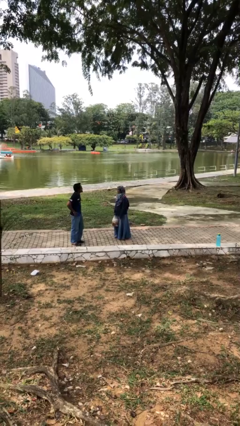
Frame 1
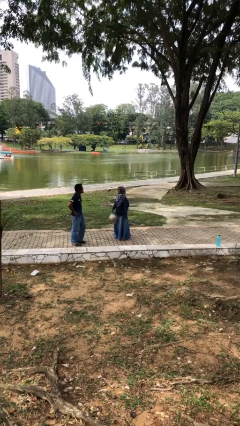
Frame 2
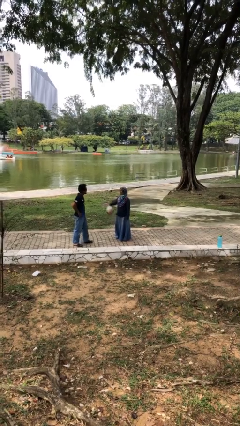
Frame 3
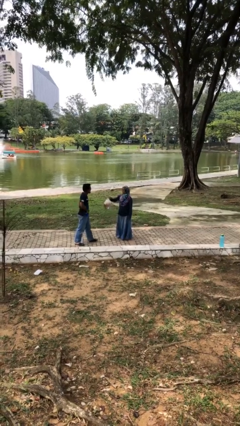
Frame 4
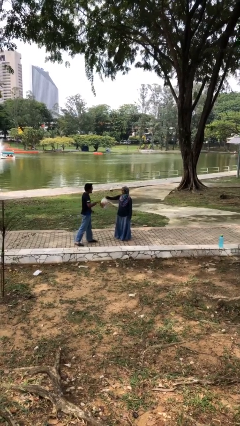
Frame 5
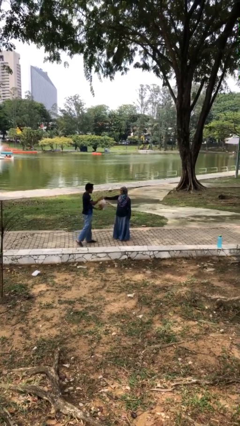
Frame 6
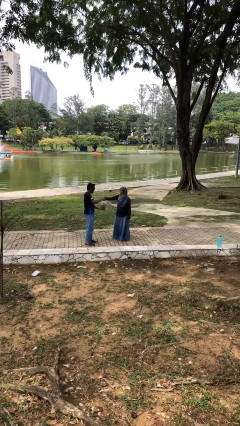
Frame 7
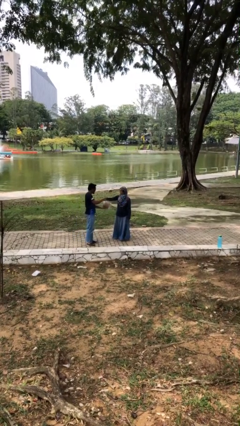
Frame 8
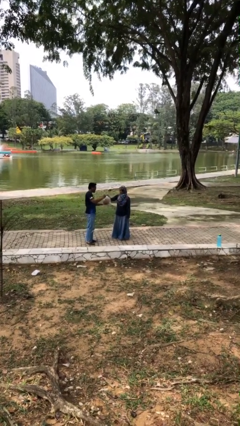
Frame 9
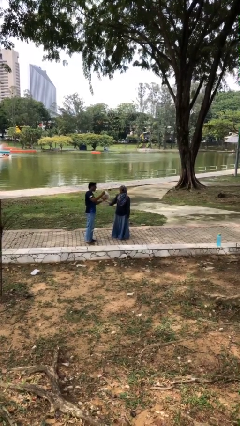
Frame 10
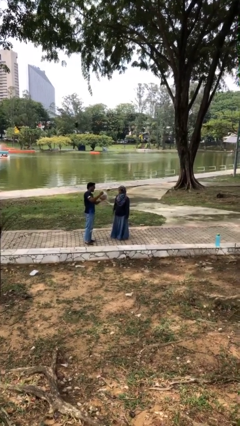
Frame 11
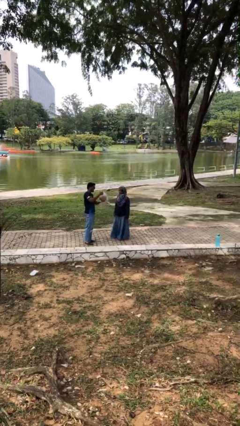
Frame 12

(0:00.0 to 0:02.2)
person transfers object to person

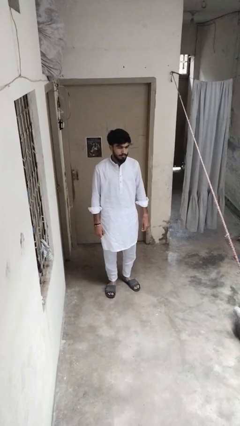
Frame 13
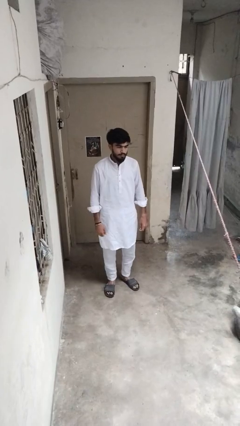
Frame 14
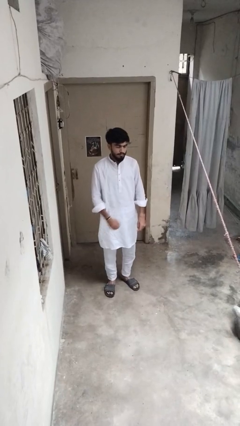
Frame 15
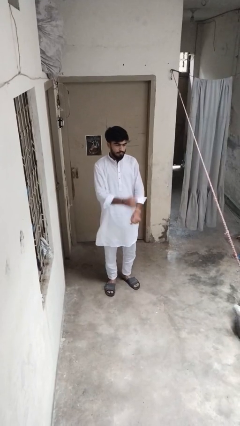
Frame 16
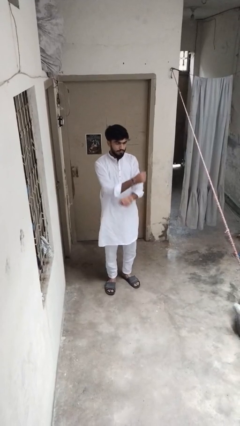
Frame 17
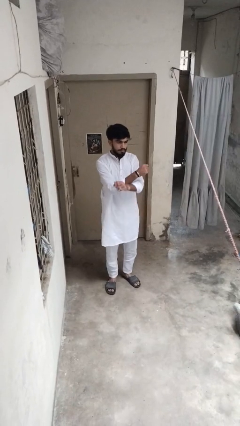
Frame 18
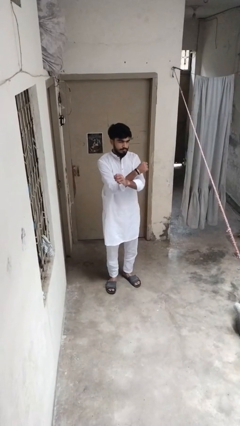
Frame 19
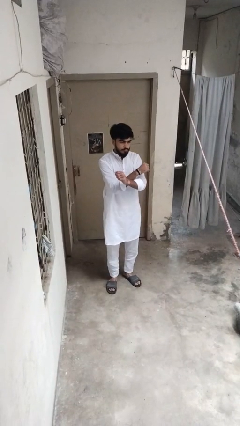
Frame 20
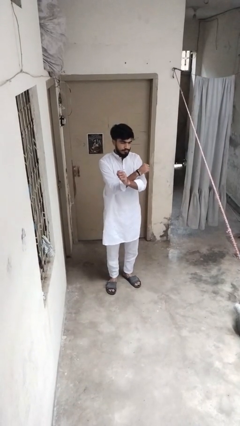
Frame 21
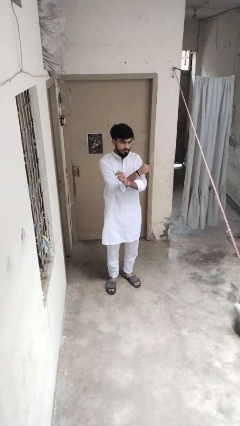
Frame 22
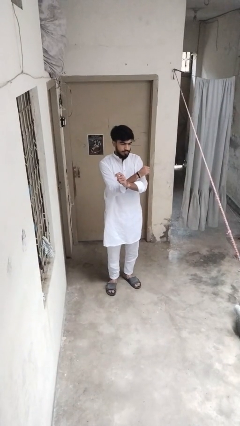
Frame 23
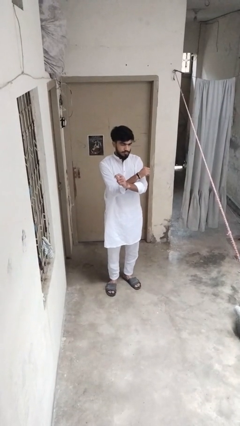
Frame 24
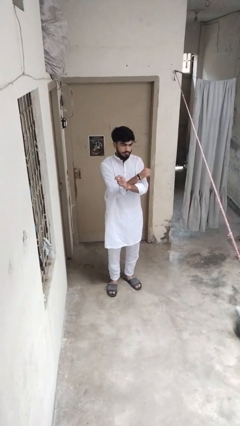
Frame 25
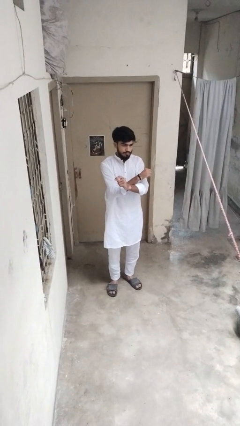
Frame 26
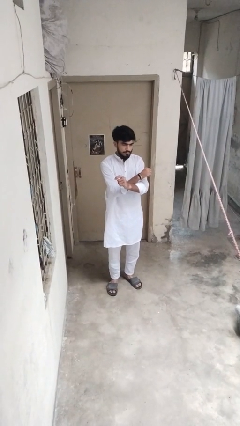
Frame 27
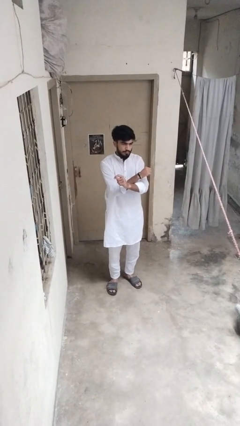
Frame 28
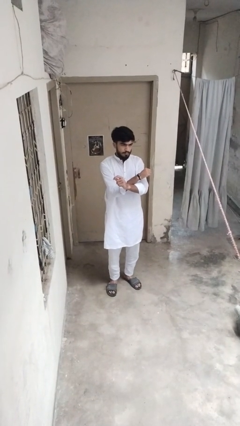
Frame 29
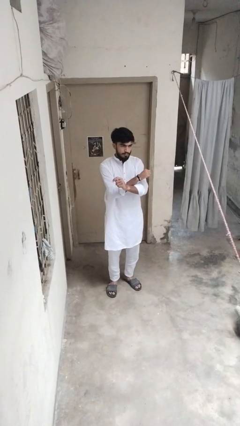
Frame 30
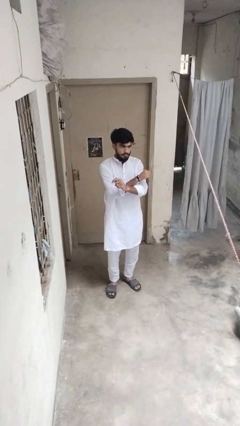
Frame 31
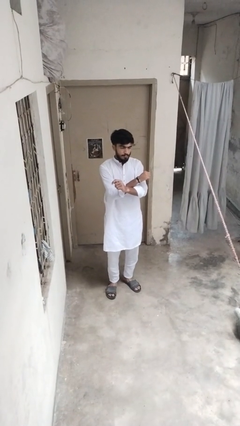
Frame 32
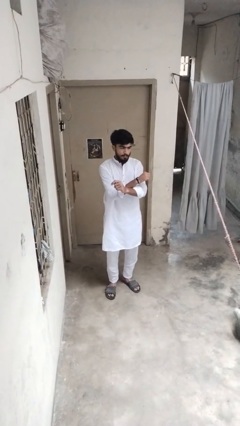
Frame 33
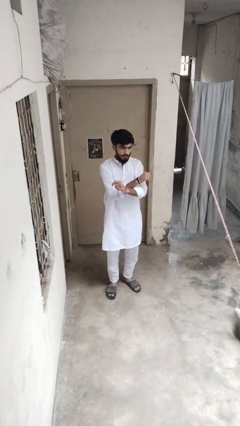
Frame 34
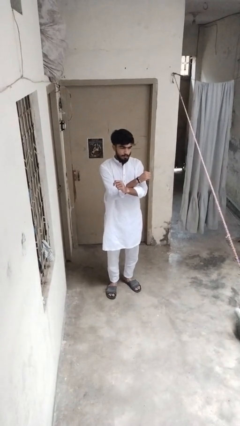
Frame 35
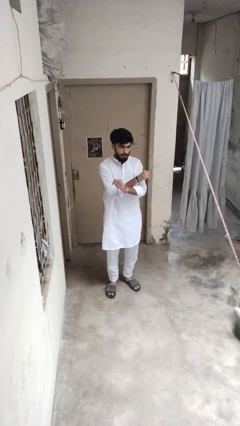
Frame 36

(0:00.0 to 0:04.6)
person gestures arms x

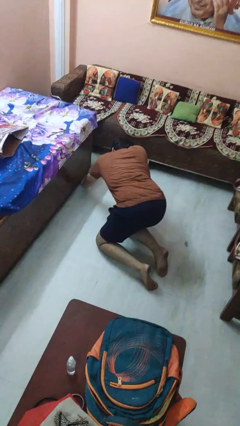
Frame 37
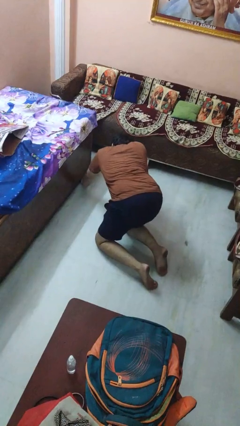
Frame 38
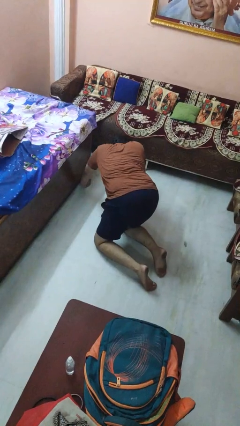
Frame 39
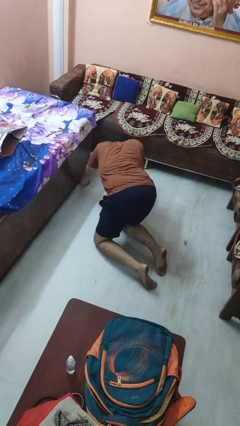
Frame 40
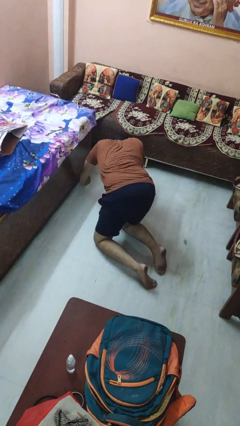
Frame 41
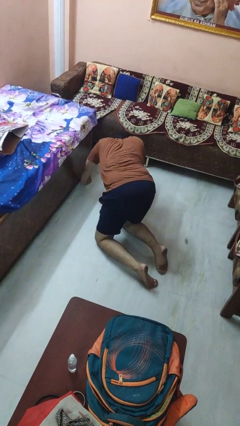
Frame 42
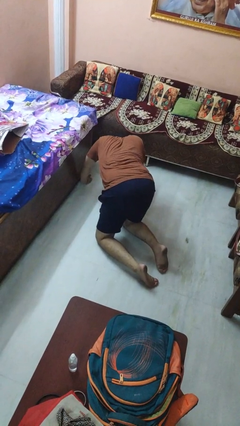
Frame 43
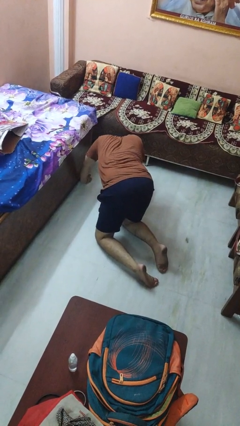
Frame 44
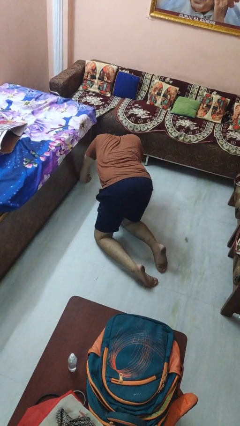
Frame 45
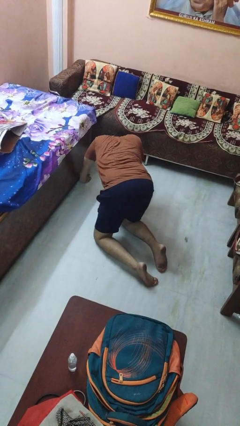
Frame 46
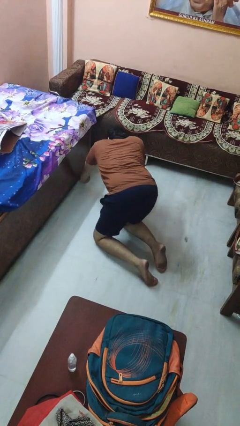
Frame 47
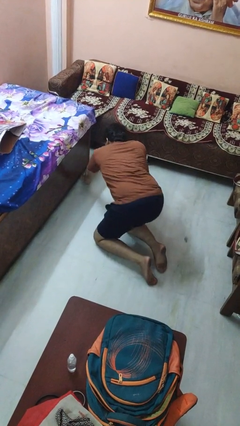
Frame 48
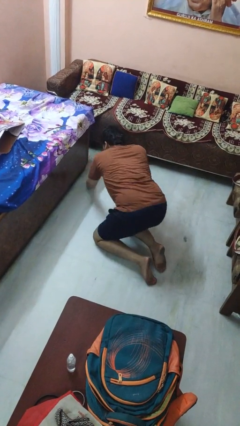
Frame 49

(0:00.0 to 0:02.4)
person searches under bed

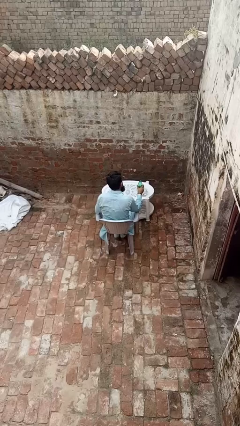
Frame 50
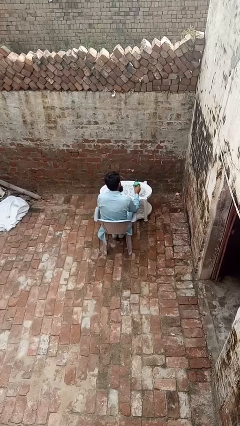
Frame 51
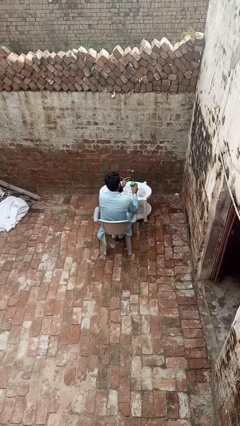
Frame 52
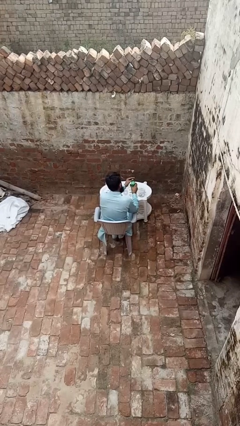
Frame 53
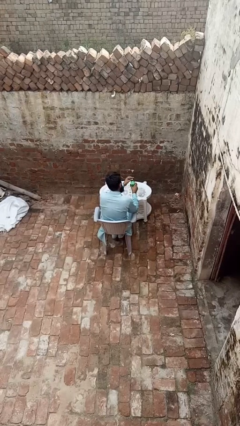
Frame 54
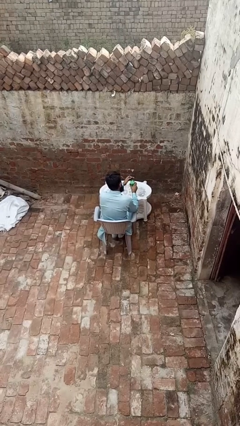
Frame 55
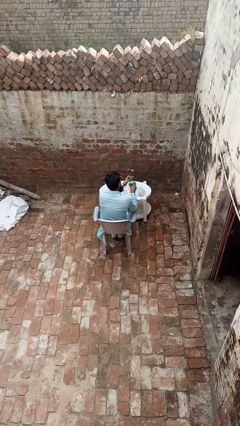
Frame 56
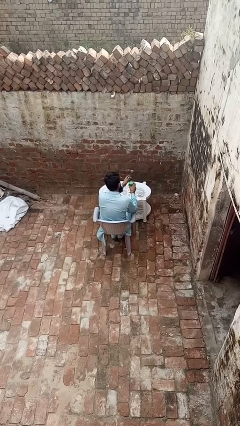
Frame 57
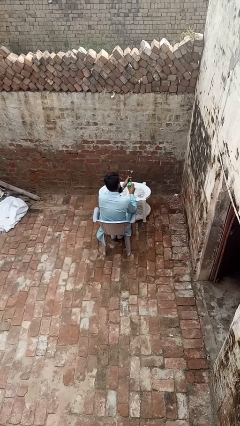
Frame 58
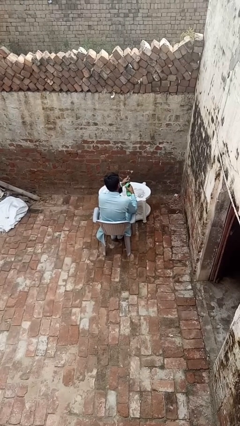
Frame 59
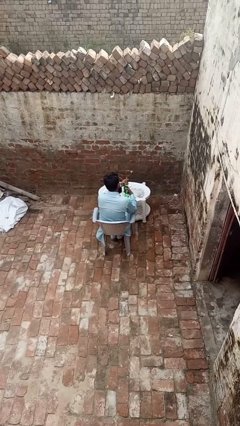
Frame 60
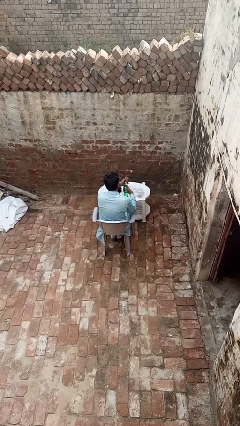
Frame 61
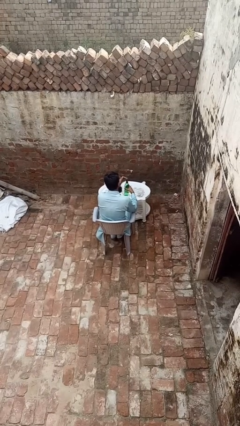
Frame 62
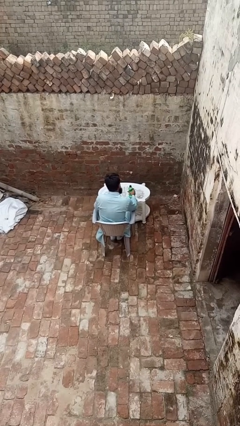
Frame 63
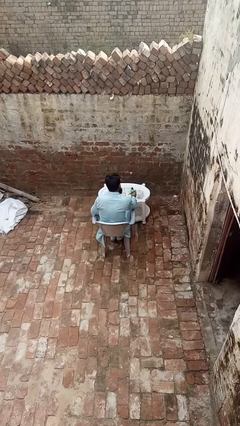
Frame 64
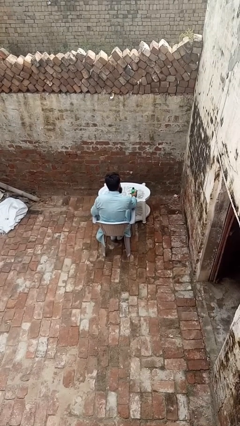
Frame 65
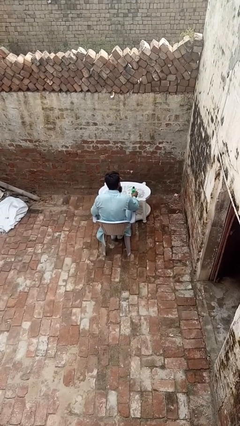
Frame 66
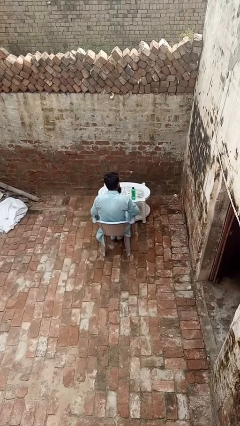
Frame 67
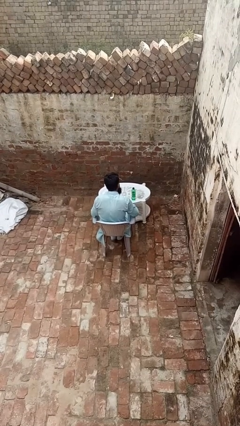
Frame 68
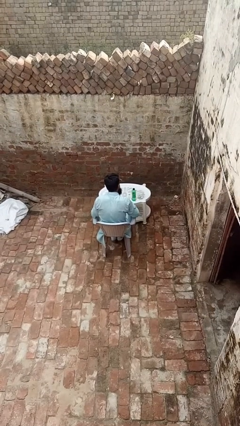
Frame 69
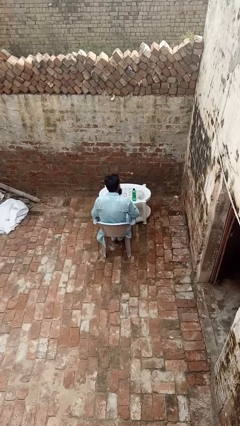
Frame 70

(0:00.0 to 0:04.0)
person screws lid to bottle

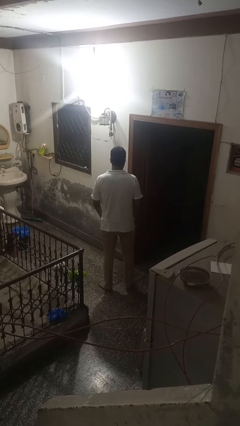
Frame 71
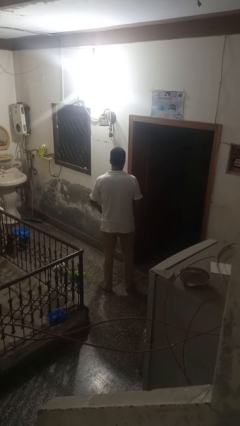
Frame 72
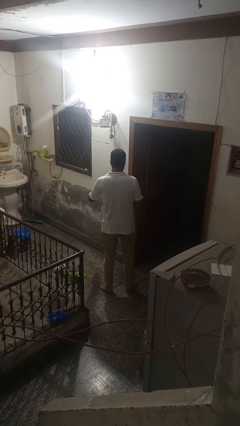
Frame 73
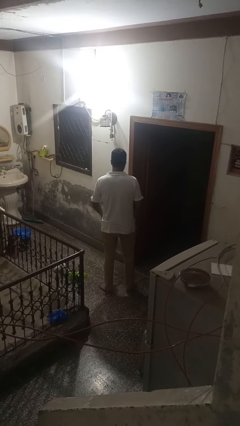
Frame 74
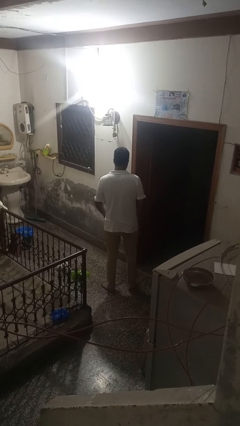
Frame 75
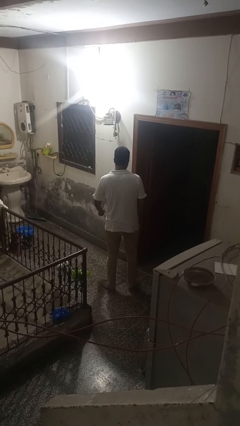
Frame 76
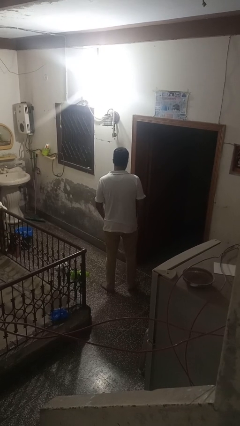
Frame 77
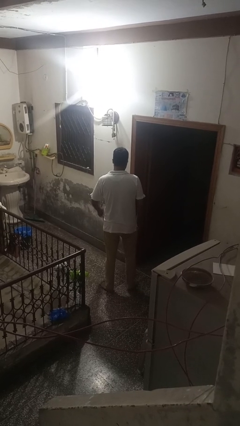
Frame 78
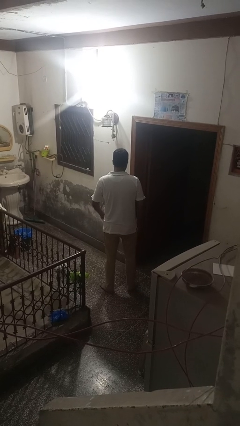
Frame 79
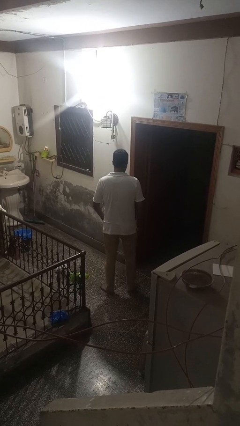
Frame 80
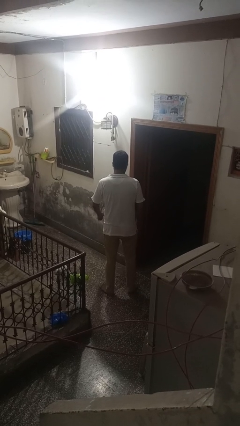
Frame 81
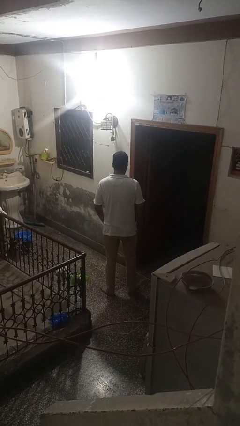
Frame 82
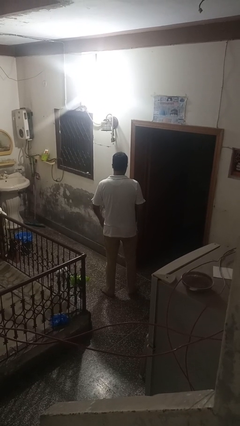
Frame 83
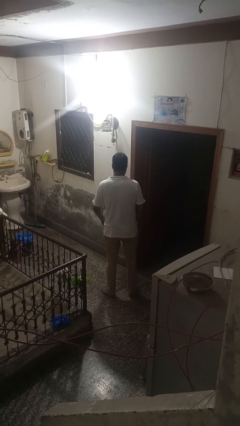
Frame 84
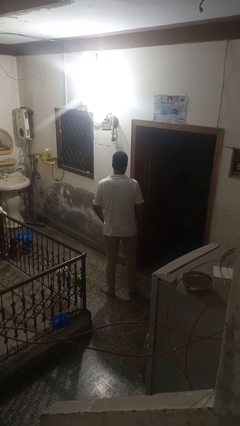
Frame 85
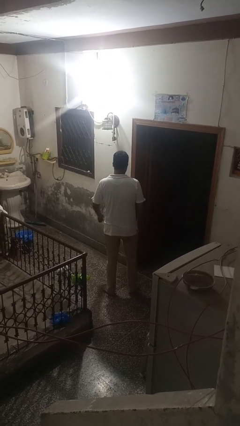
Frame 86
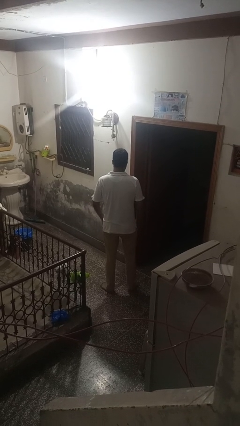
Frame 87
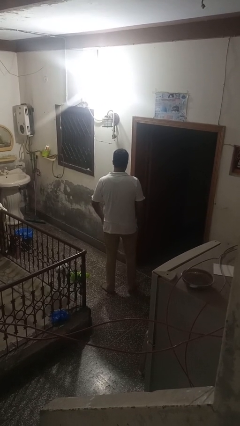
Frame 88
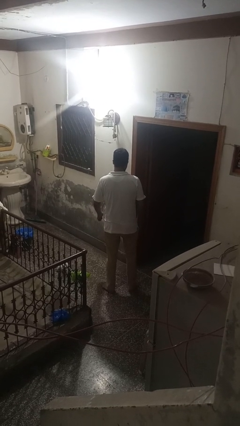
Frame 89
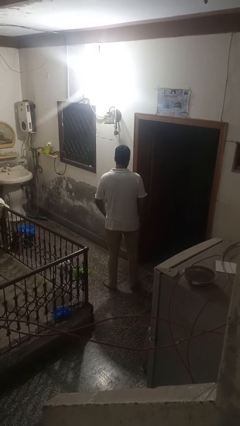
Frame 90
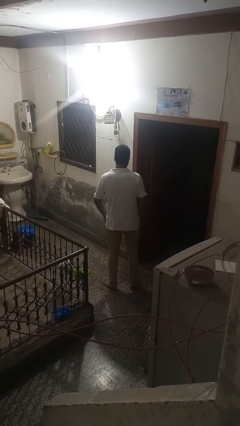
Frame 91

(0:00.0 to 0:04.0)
person slaps hands on thighs
